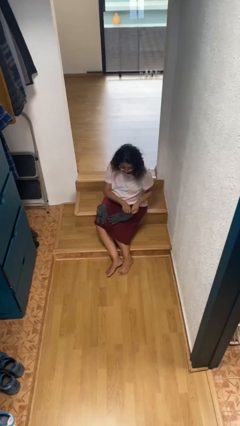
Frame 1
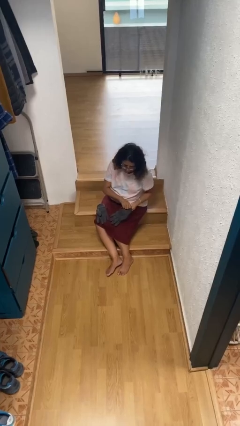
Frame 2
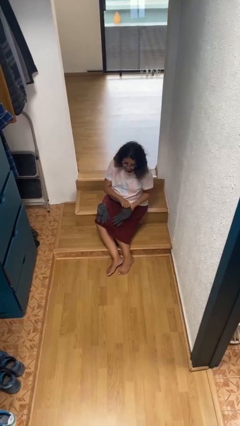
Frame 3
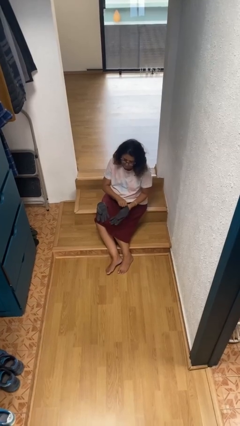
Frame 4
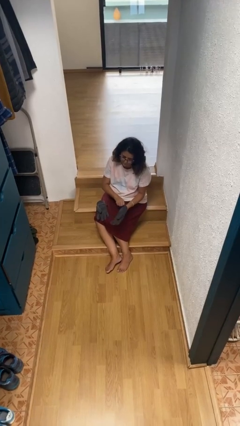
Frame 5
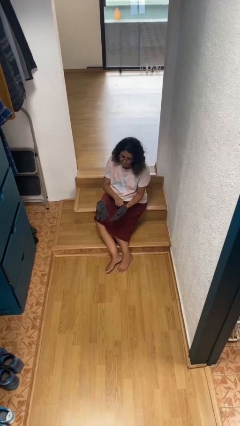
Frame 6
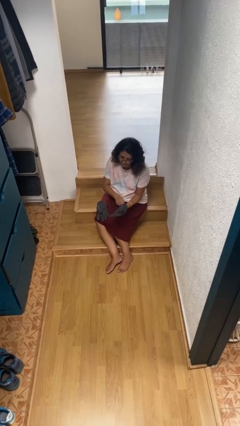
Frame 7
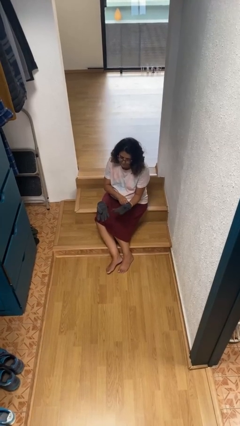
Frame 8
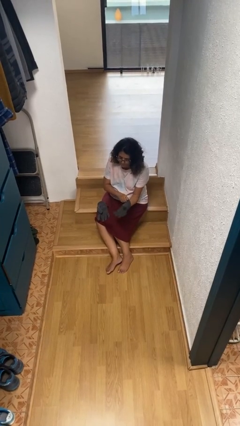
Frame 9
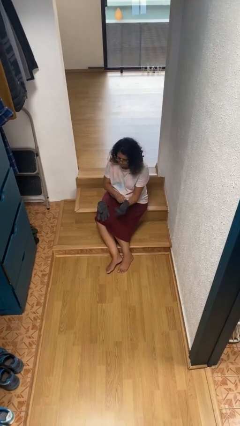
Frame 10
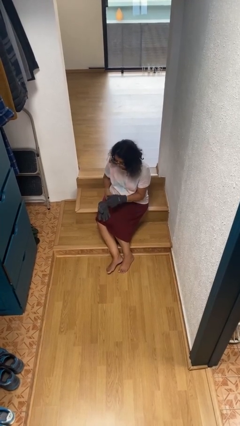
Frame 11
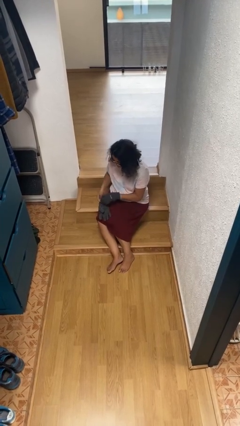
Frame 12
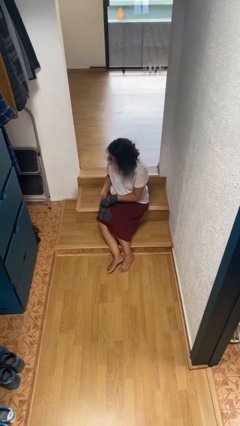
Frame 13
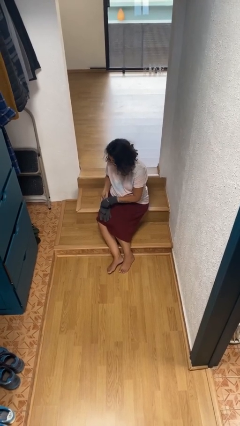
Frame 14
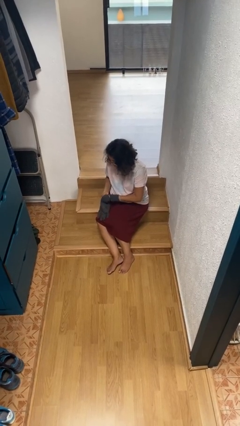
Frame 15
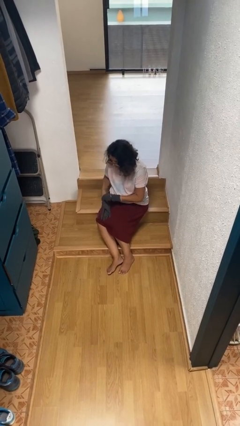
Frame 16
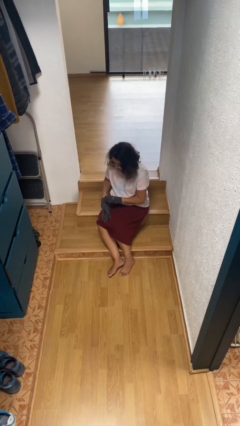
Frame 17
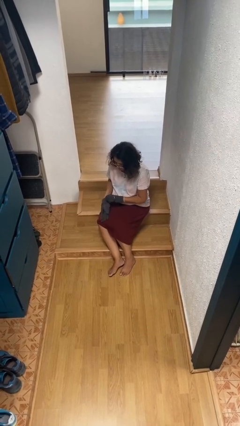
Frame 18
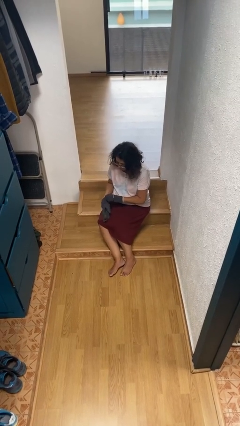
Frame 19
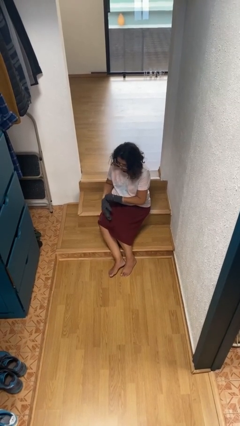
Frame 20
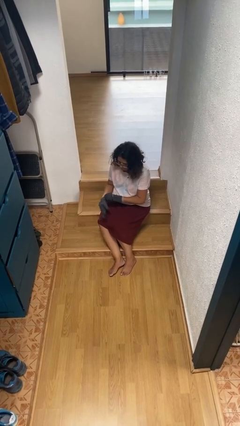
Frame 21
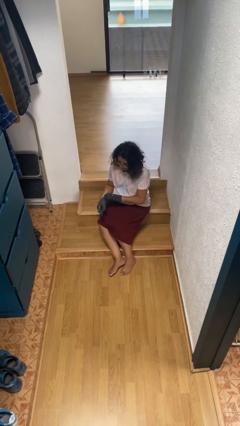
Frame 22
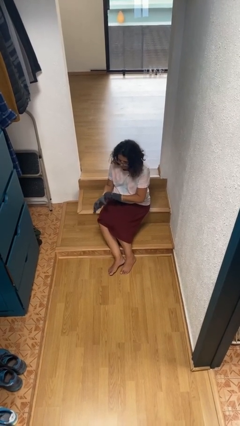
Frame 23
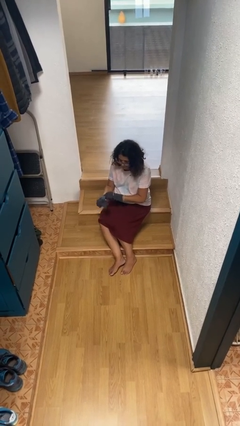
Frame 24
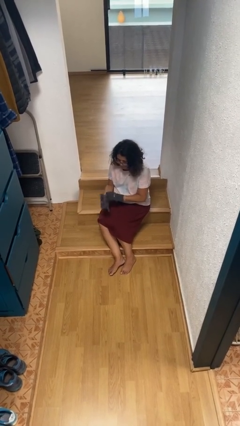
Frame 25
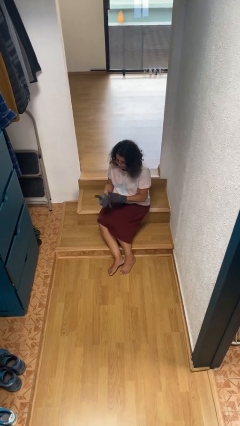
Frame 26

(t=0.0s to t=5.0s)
person puts on gloves

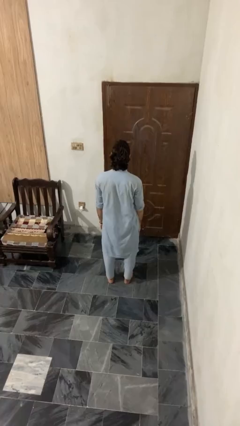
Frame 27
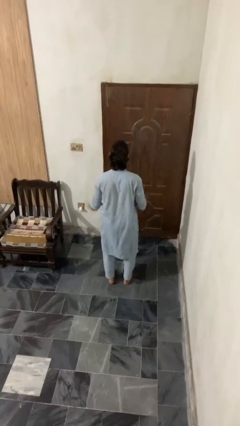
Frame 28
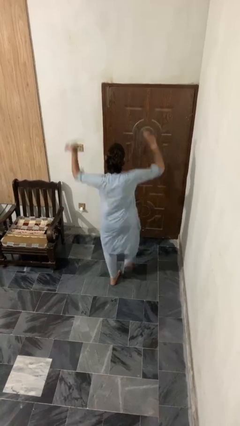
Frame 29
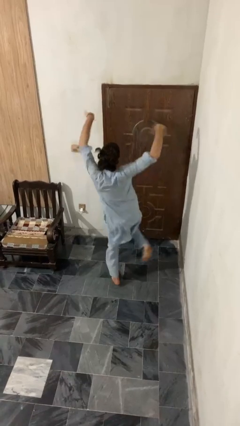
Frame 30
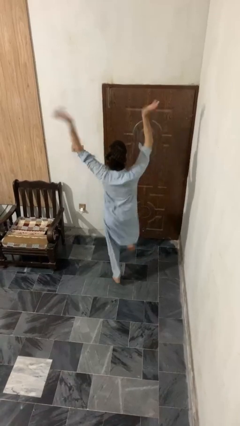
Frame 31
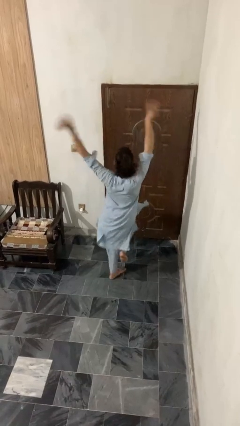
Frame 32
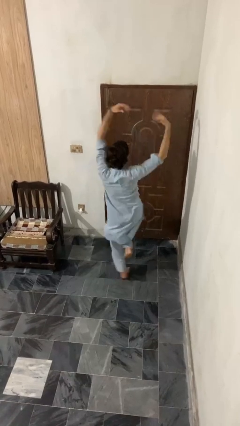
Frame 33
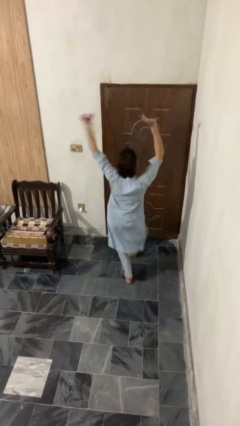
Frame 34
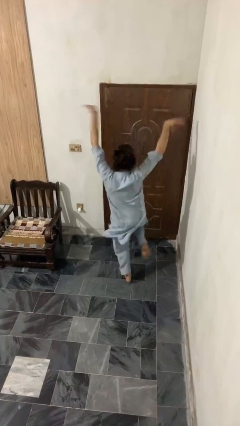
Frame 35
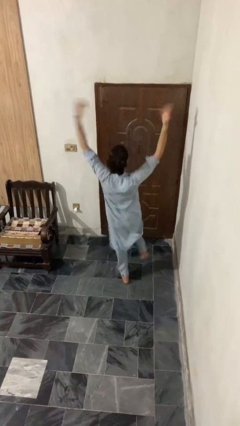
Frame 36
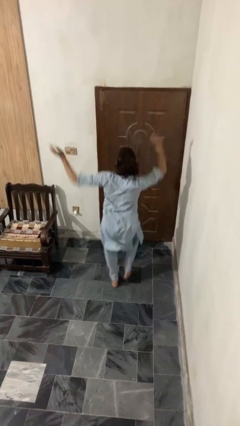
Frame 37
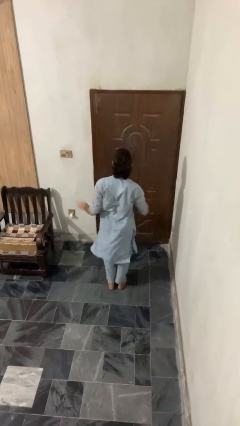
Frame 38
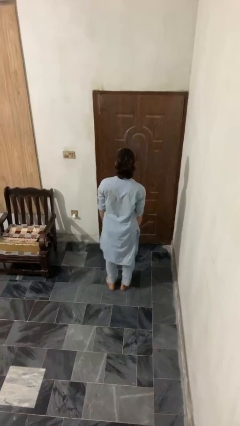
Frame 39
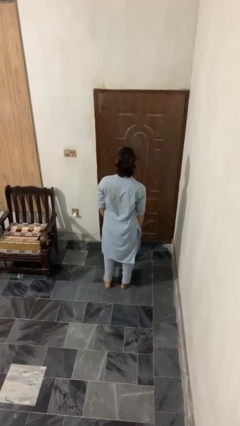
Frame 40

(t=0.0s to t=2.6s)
person dances in place

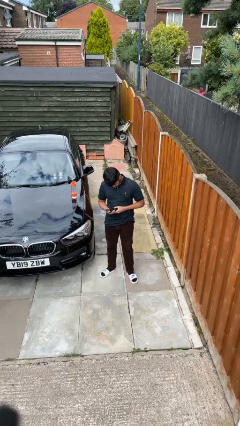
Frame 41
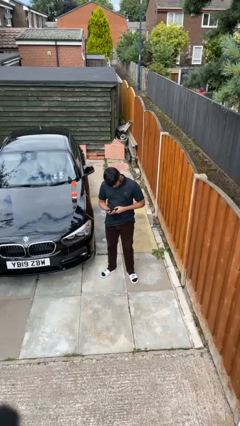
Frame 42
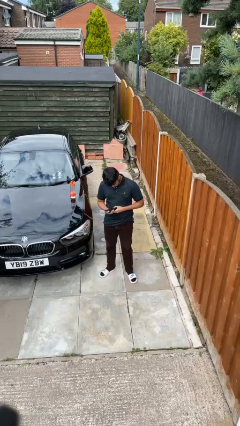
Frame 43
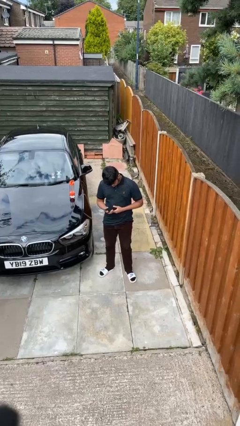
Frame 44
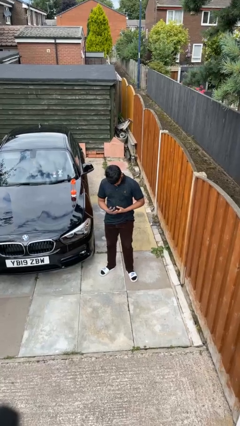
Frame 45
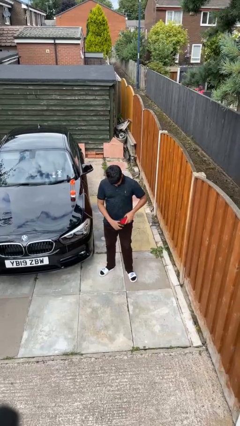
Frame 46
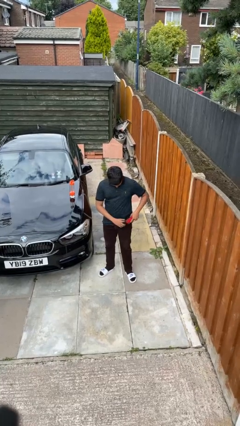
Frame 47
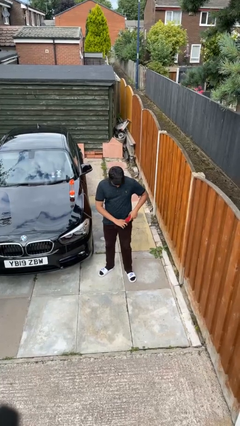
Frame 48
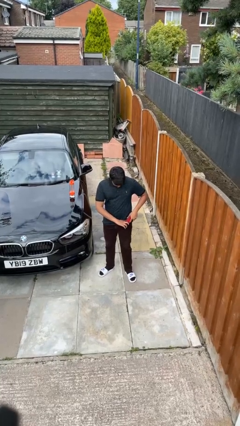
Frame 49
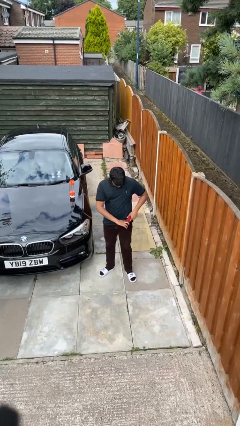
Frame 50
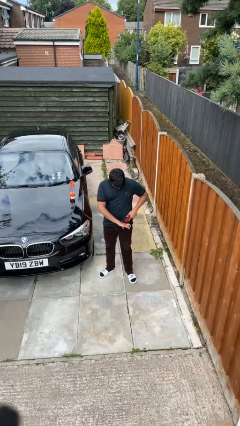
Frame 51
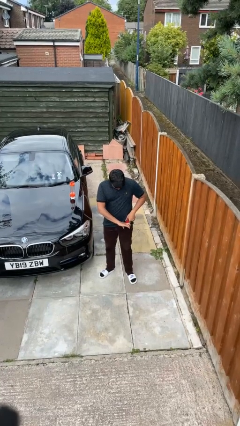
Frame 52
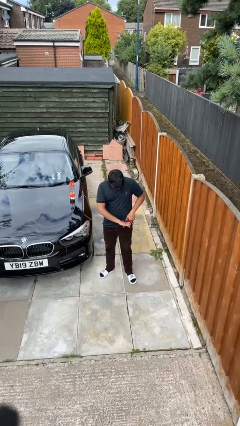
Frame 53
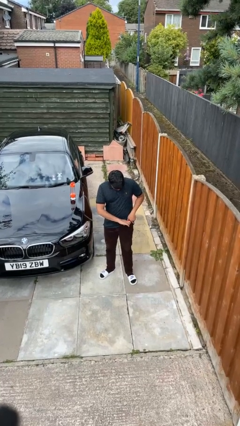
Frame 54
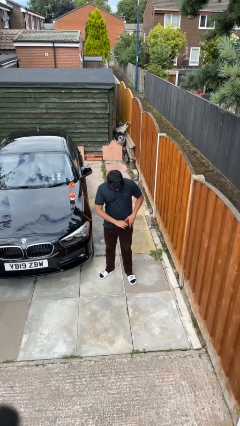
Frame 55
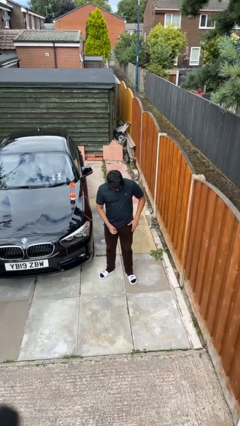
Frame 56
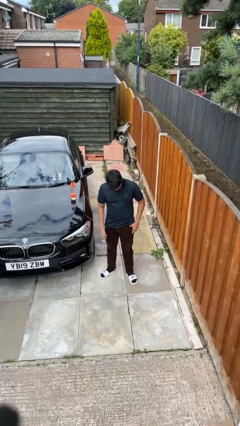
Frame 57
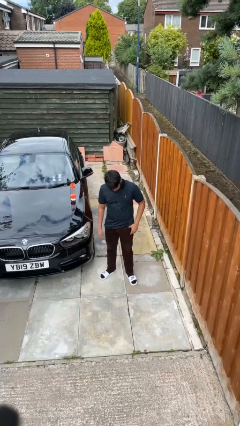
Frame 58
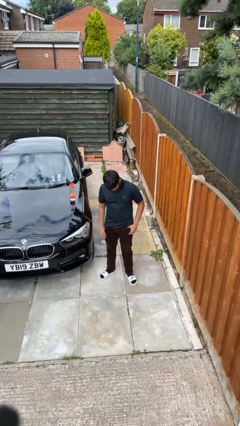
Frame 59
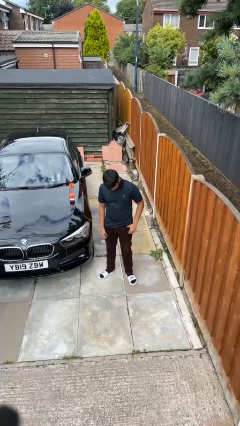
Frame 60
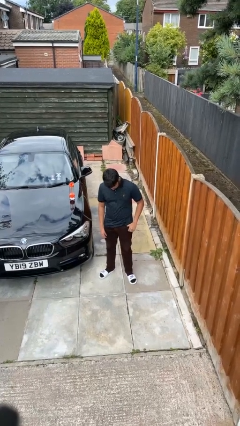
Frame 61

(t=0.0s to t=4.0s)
person puts phone into pocket

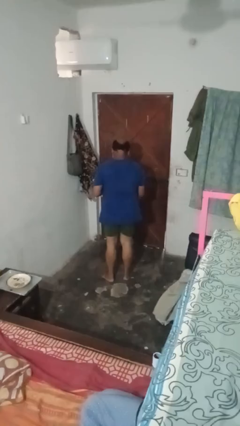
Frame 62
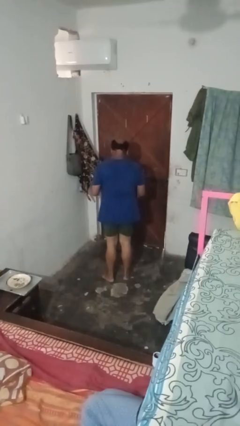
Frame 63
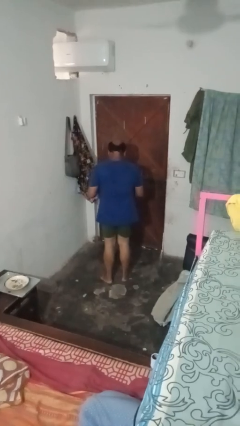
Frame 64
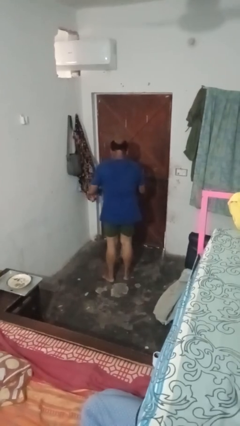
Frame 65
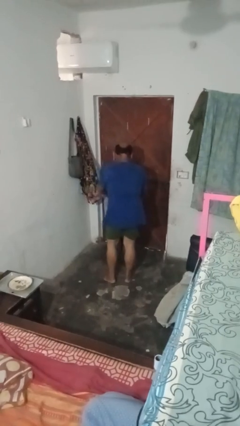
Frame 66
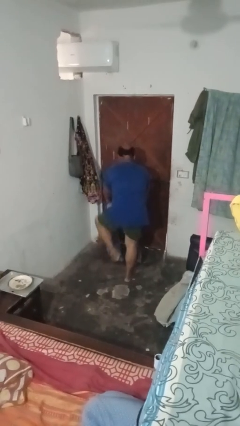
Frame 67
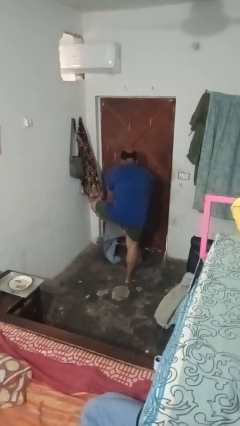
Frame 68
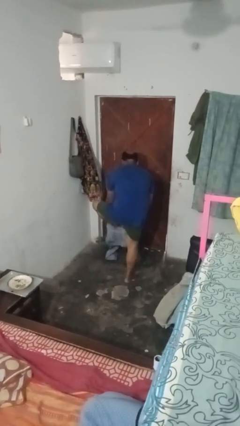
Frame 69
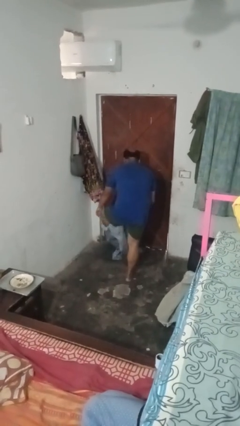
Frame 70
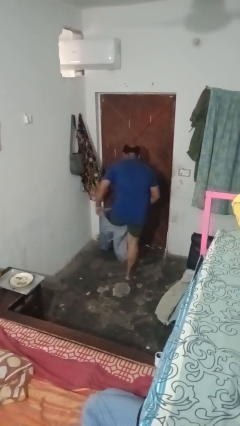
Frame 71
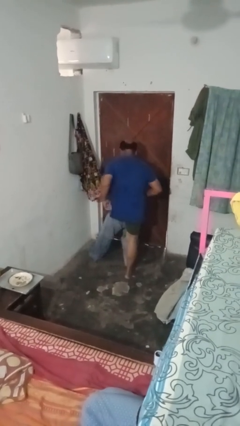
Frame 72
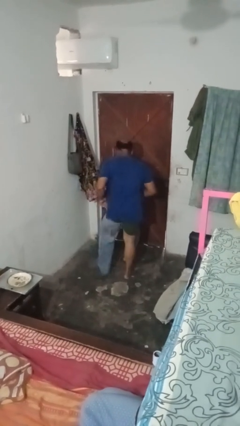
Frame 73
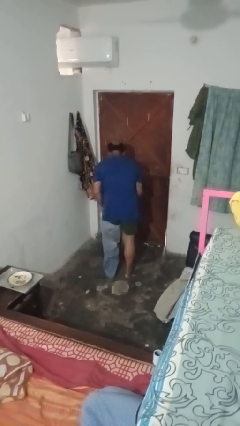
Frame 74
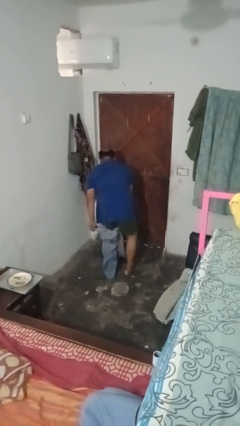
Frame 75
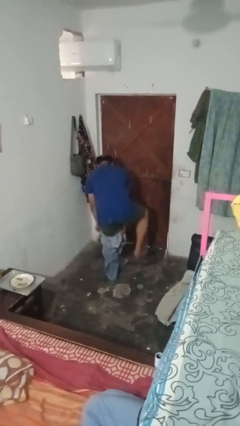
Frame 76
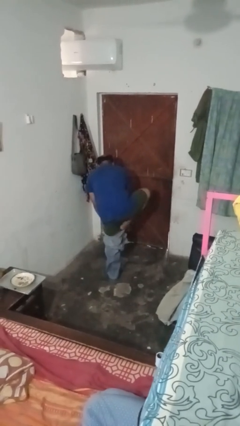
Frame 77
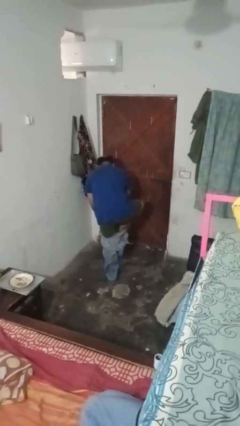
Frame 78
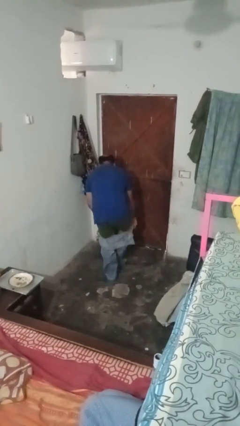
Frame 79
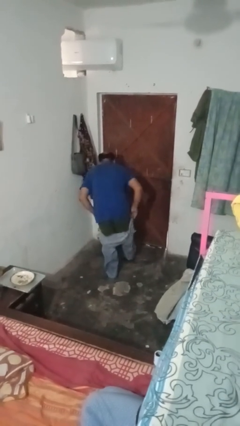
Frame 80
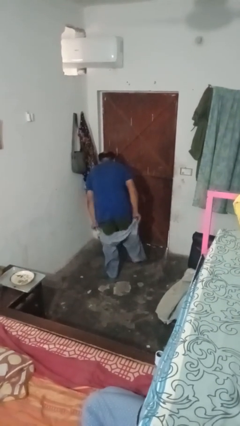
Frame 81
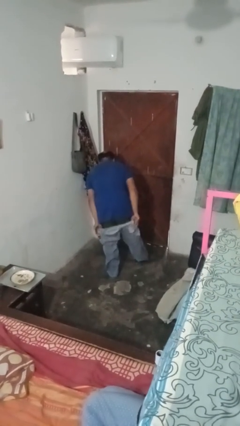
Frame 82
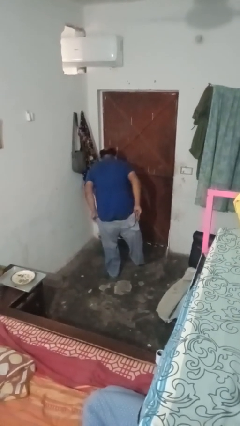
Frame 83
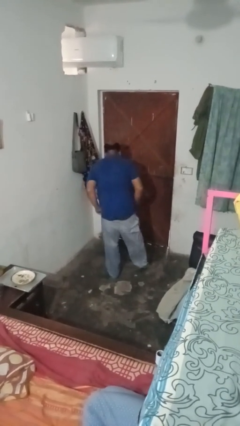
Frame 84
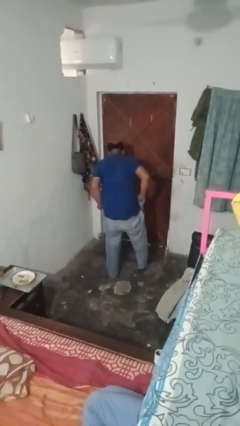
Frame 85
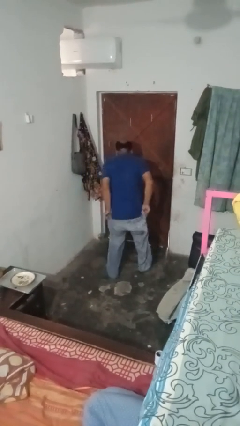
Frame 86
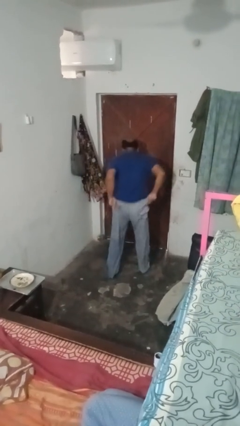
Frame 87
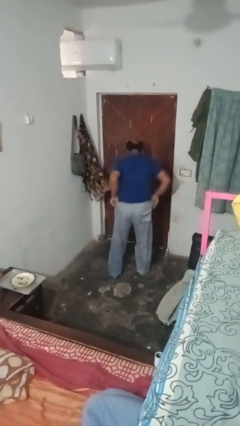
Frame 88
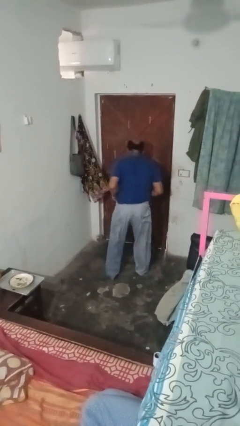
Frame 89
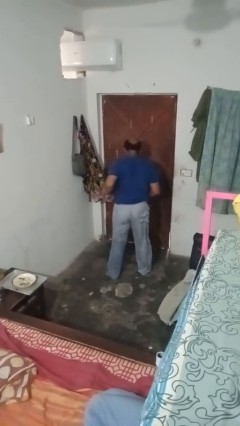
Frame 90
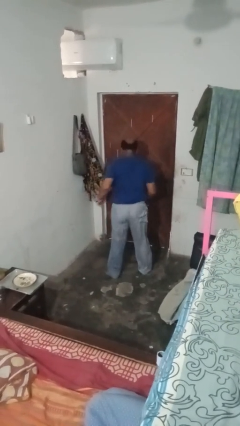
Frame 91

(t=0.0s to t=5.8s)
person puts on pants

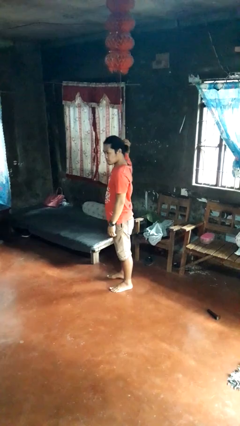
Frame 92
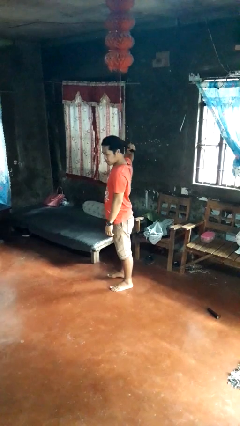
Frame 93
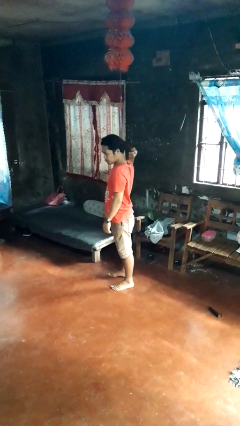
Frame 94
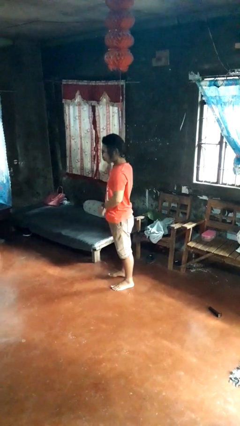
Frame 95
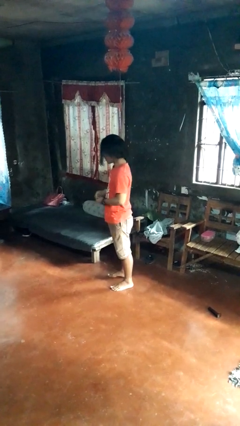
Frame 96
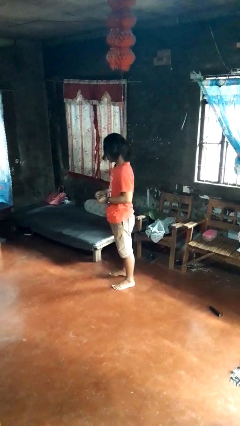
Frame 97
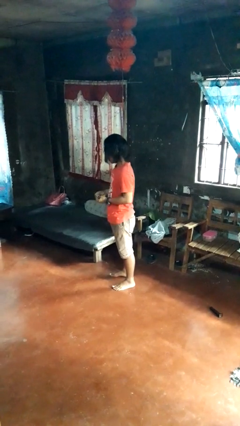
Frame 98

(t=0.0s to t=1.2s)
person takes off hairtie
